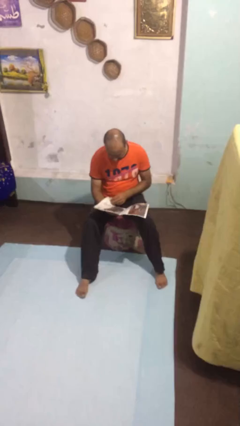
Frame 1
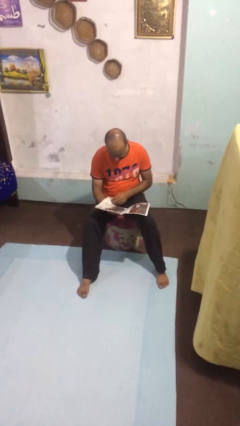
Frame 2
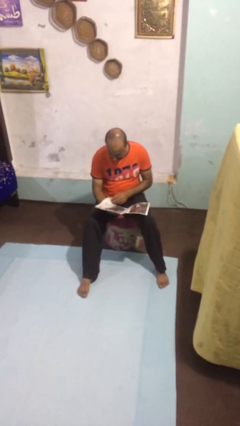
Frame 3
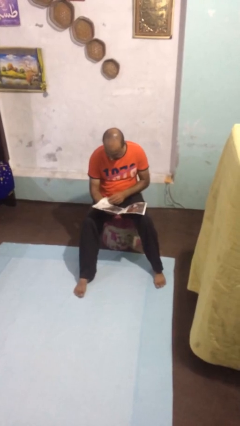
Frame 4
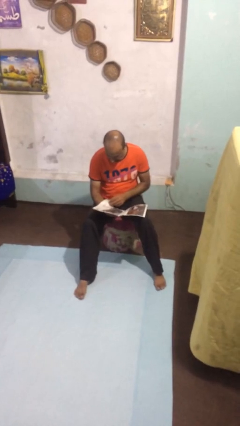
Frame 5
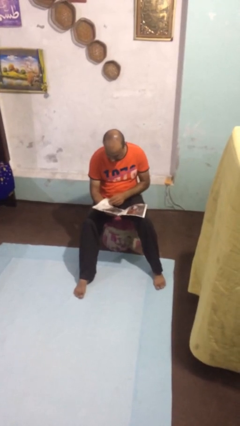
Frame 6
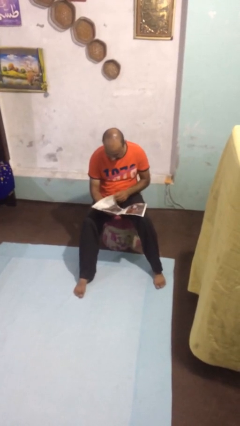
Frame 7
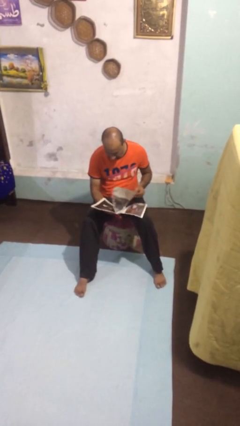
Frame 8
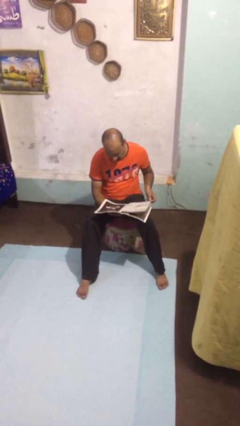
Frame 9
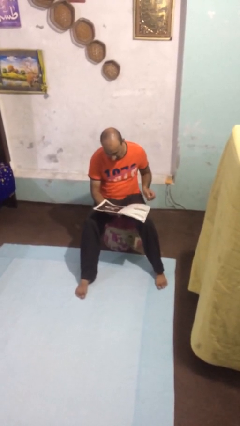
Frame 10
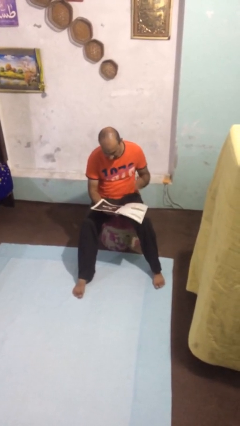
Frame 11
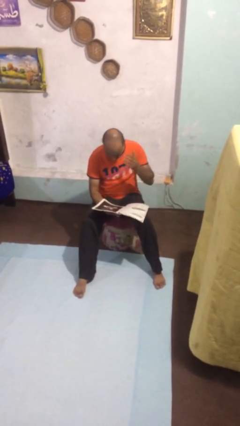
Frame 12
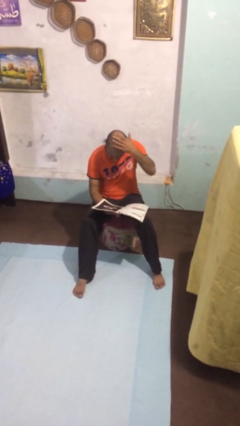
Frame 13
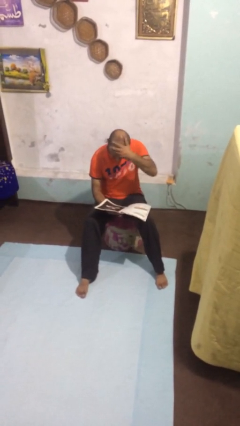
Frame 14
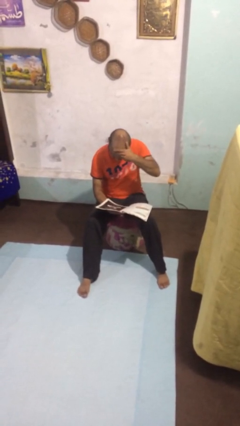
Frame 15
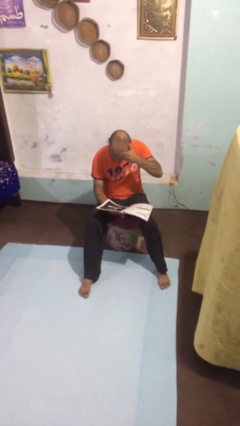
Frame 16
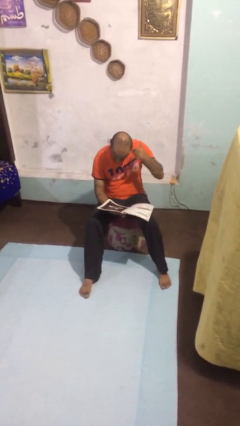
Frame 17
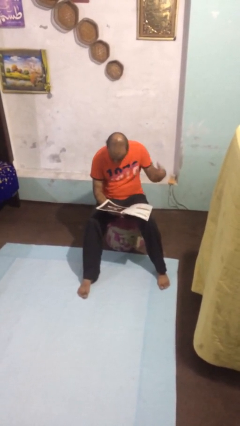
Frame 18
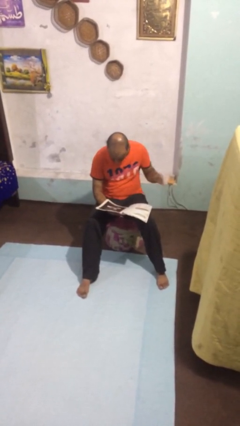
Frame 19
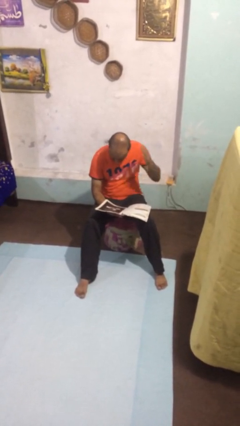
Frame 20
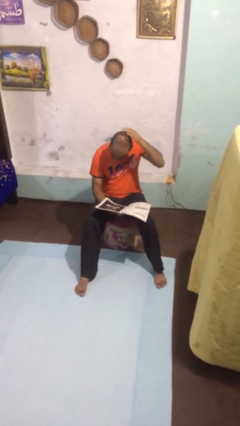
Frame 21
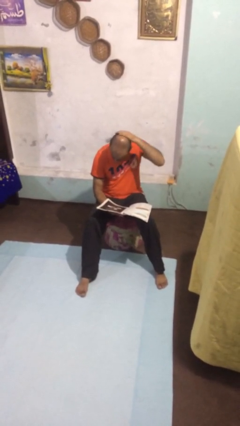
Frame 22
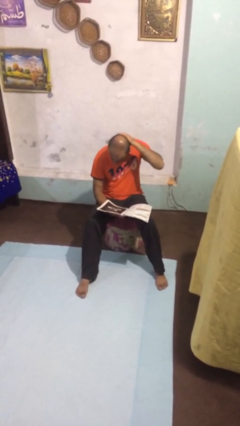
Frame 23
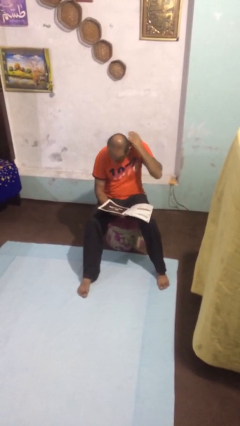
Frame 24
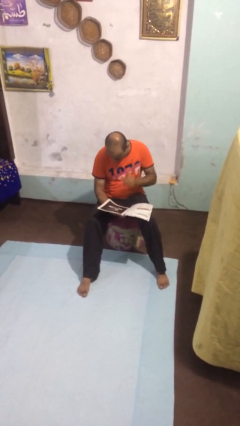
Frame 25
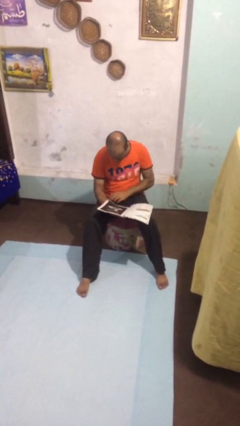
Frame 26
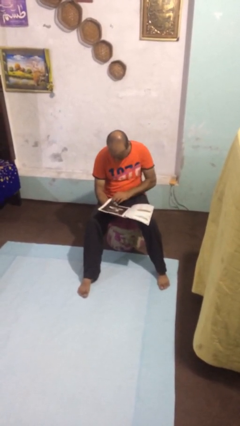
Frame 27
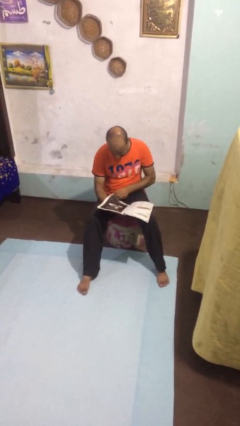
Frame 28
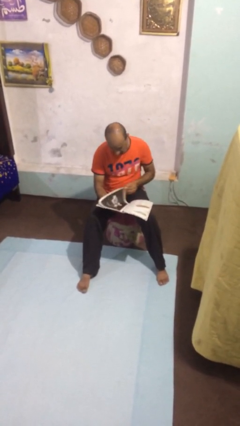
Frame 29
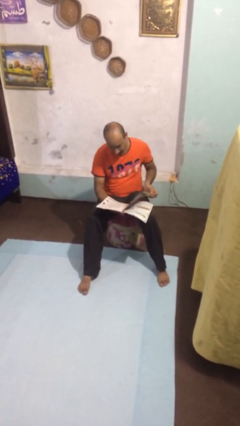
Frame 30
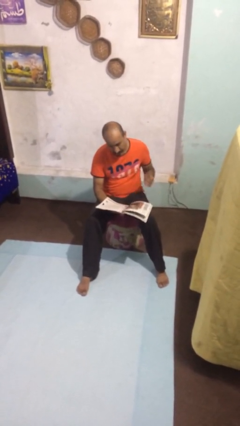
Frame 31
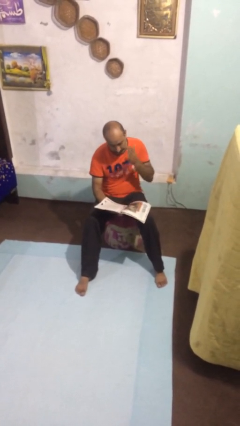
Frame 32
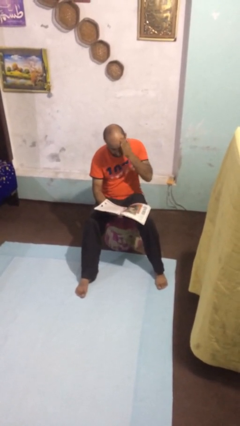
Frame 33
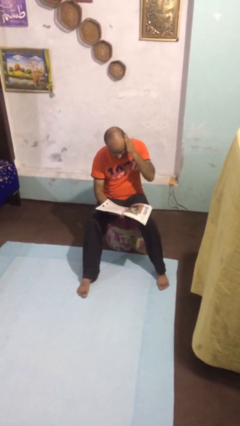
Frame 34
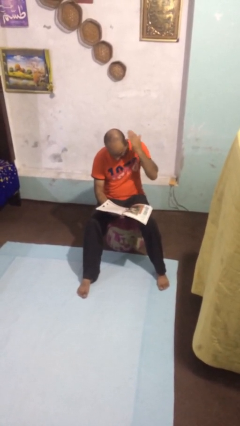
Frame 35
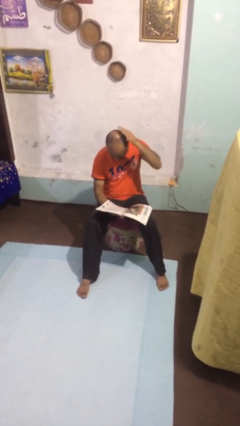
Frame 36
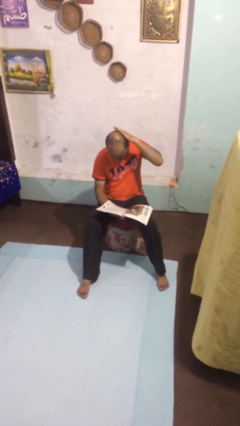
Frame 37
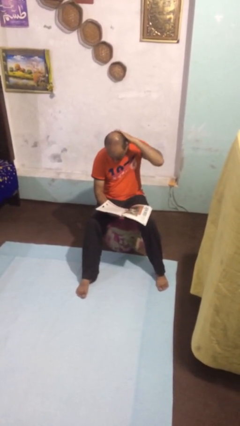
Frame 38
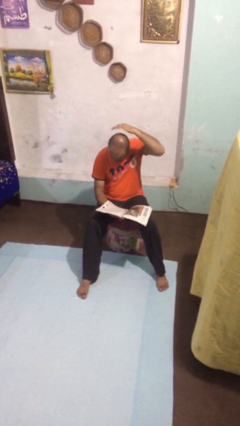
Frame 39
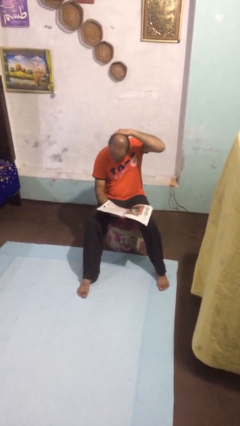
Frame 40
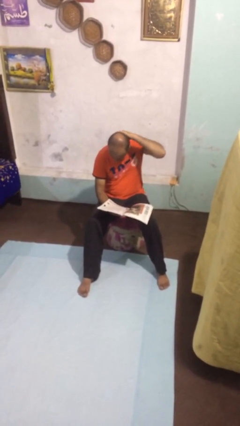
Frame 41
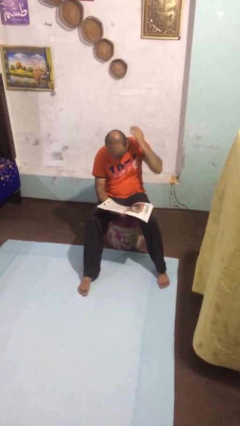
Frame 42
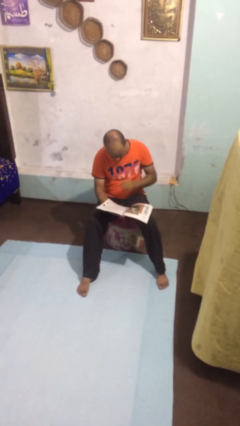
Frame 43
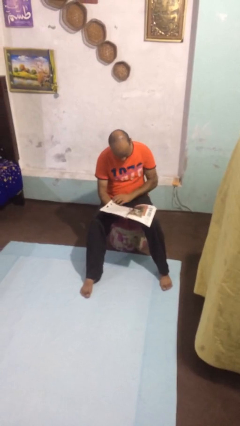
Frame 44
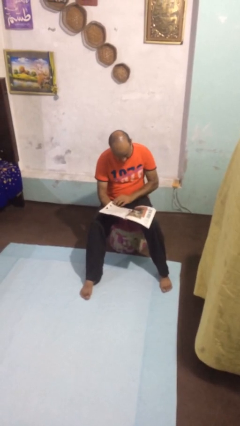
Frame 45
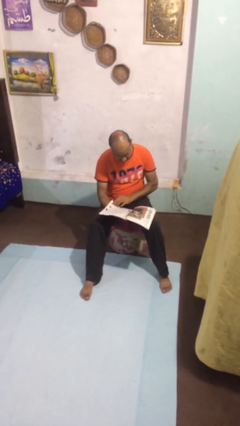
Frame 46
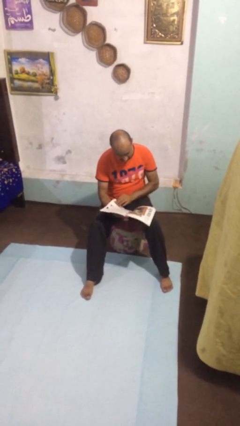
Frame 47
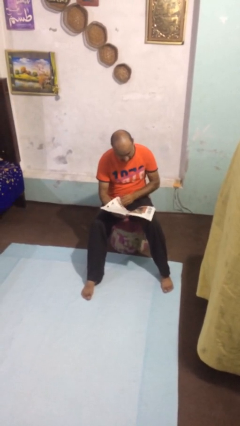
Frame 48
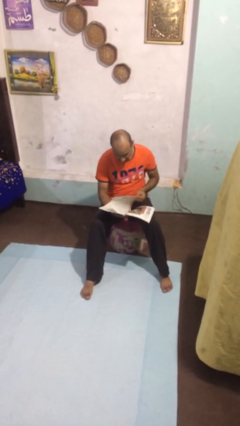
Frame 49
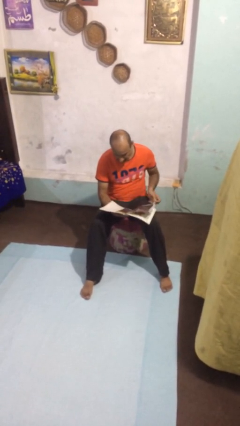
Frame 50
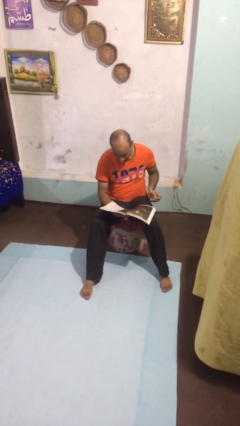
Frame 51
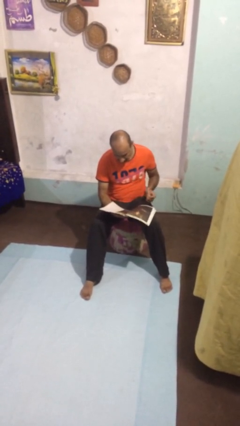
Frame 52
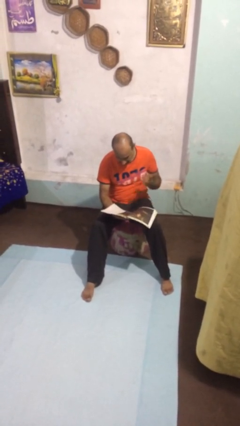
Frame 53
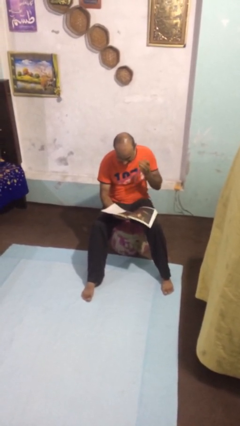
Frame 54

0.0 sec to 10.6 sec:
person reads document

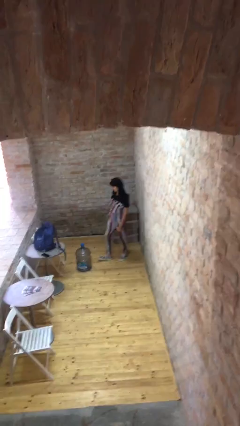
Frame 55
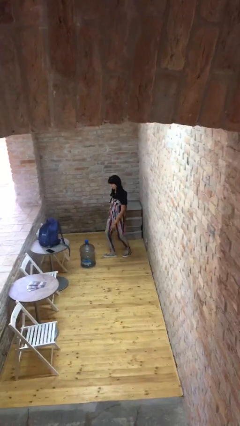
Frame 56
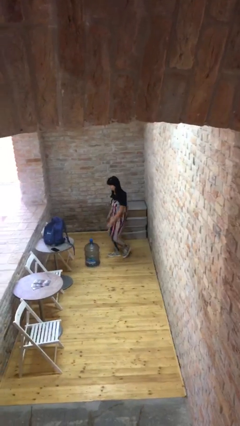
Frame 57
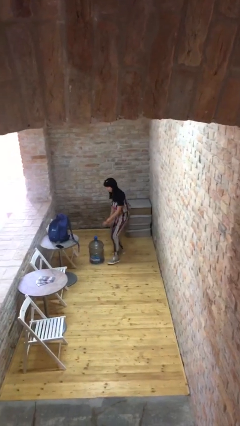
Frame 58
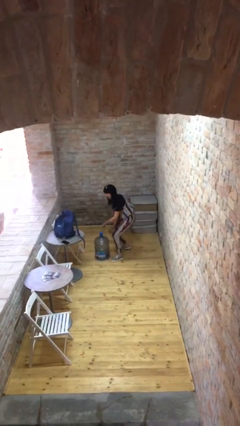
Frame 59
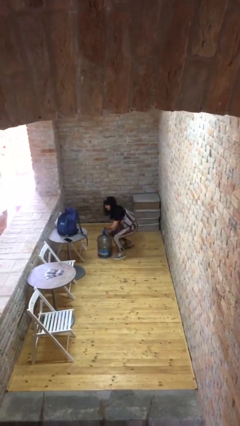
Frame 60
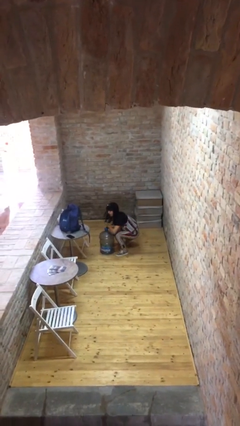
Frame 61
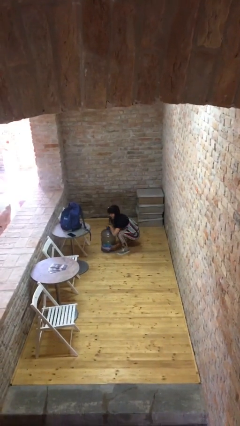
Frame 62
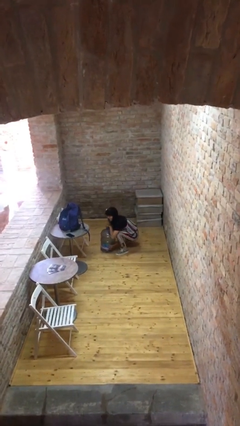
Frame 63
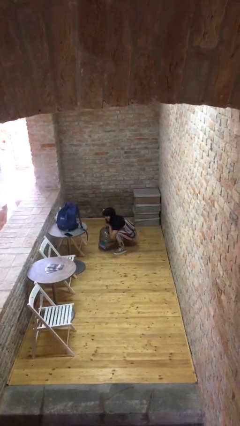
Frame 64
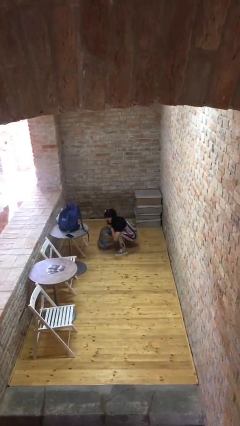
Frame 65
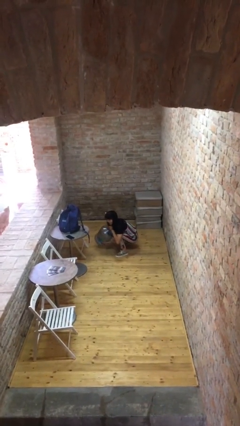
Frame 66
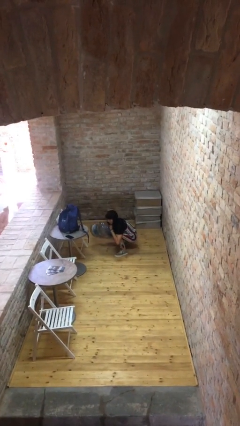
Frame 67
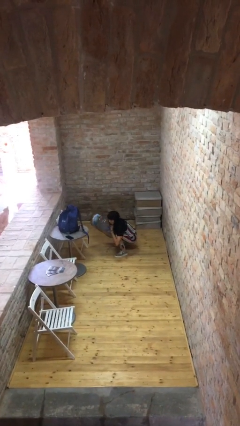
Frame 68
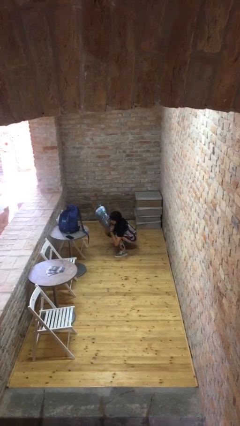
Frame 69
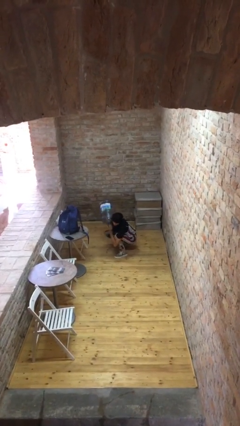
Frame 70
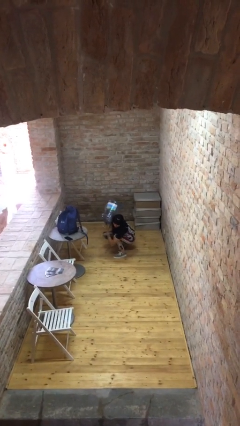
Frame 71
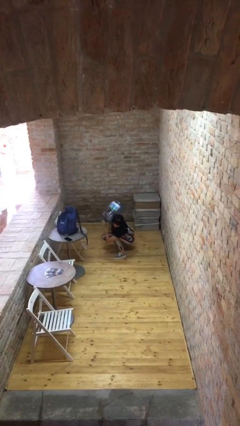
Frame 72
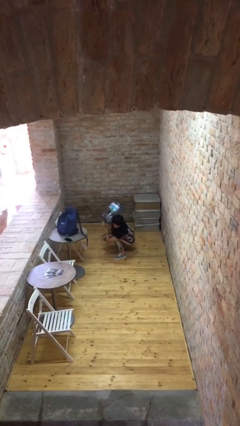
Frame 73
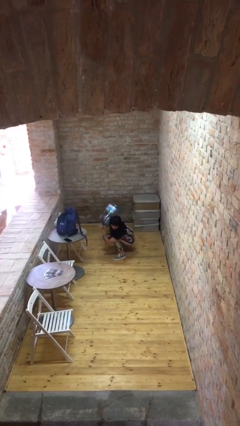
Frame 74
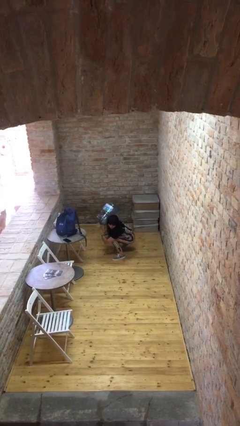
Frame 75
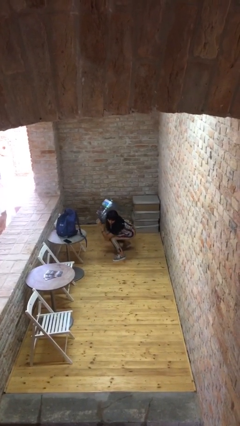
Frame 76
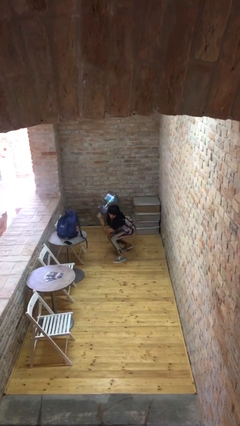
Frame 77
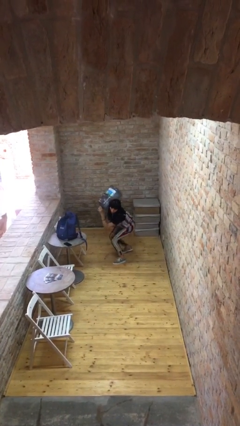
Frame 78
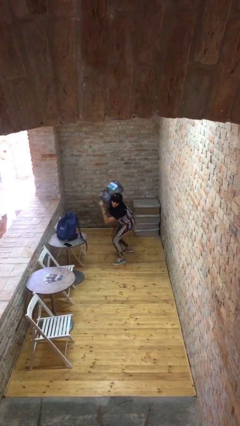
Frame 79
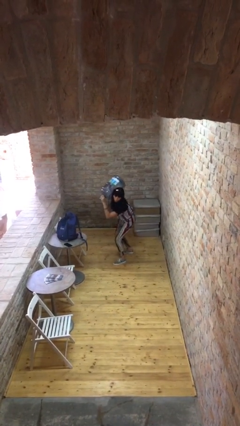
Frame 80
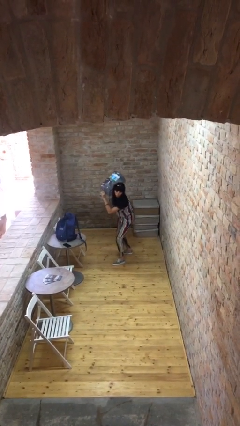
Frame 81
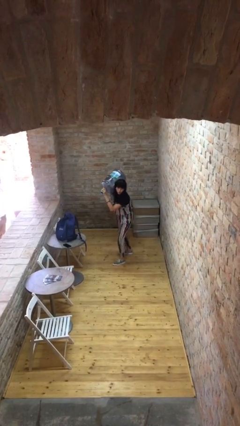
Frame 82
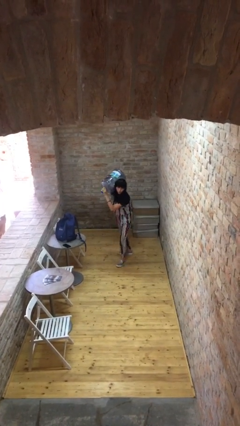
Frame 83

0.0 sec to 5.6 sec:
person picks up object from floor

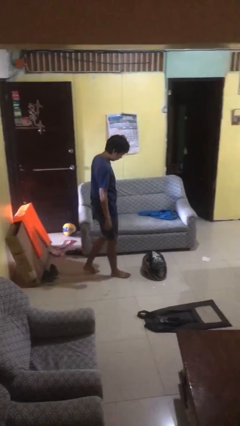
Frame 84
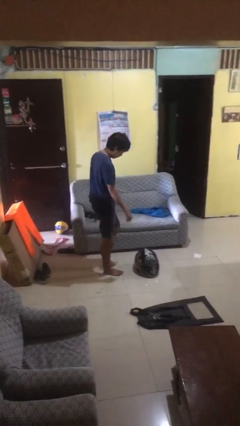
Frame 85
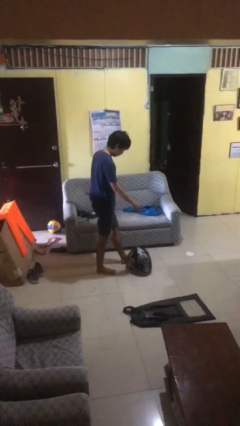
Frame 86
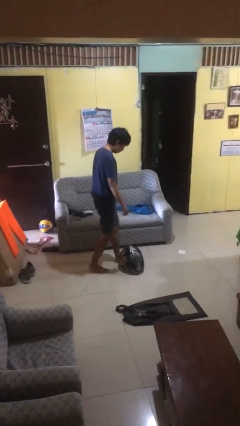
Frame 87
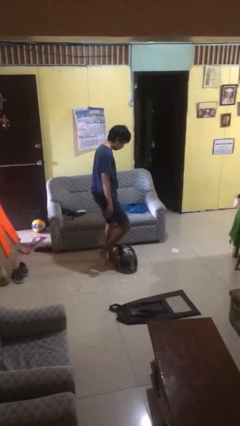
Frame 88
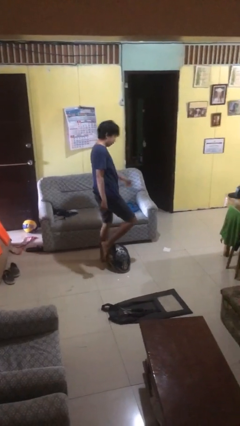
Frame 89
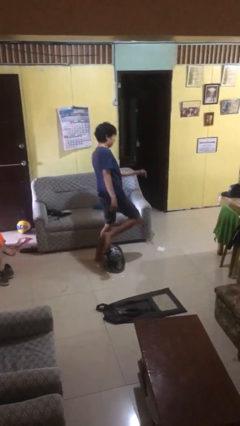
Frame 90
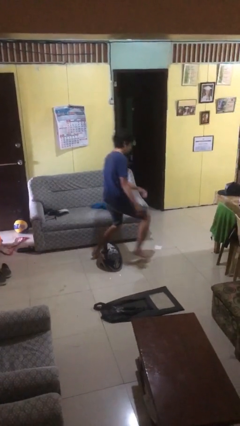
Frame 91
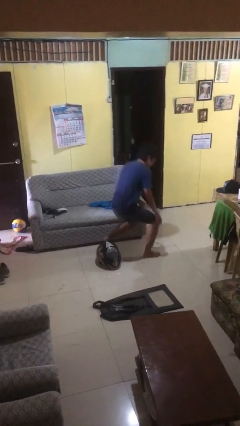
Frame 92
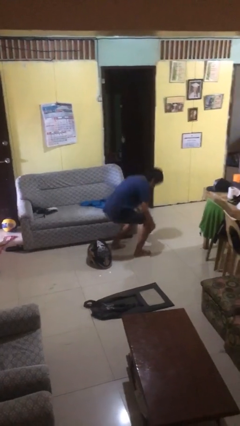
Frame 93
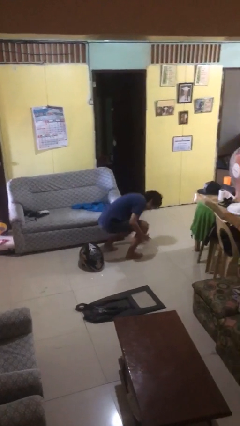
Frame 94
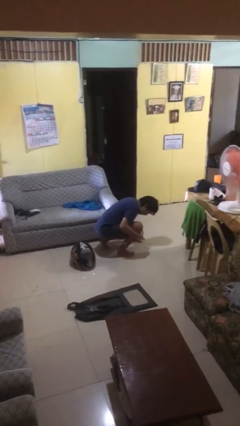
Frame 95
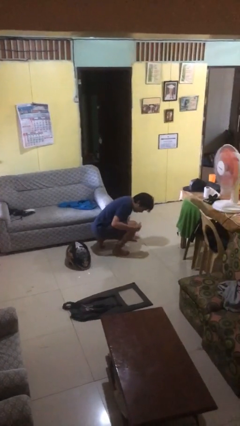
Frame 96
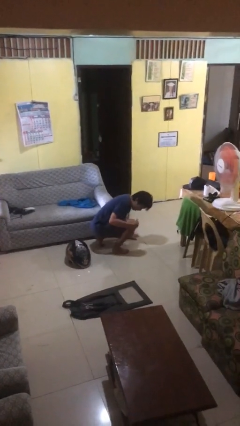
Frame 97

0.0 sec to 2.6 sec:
person trips on object on floor
